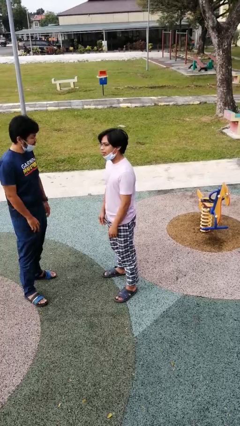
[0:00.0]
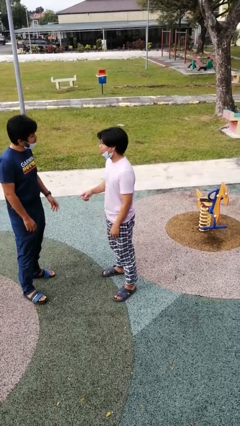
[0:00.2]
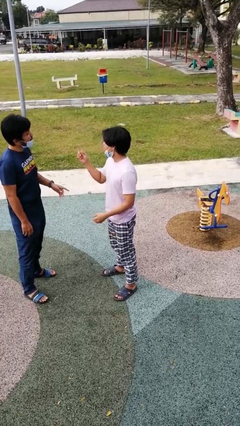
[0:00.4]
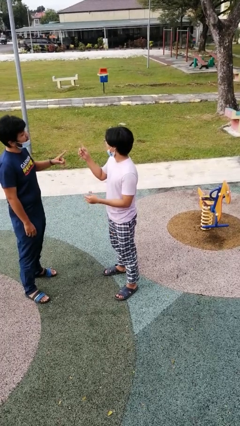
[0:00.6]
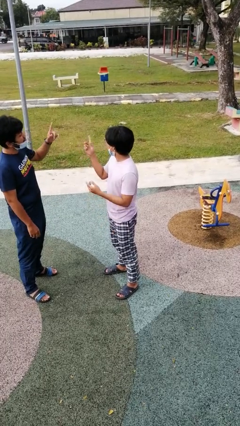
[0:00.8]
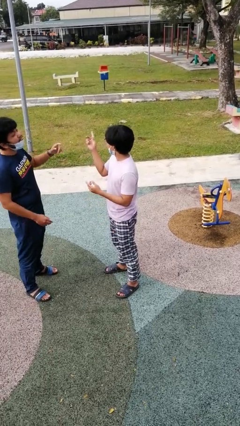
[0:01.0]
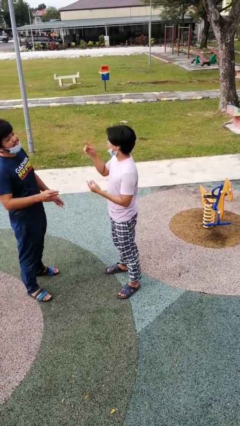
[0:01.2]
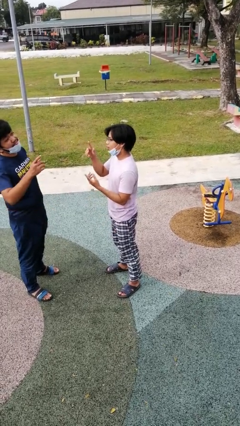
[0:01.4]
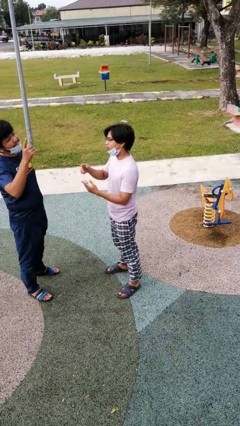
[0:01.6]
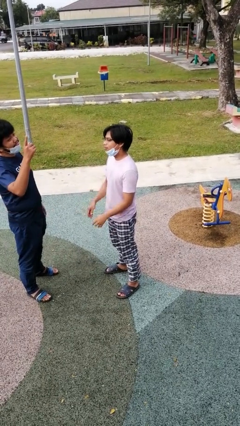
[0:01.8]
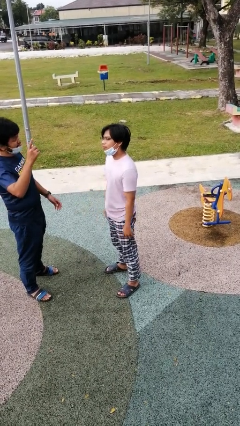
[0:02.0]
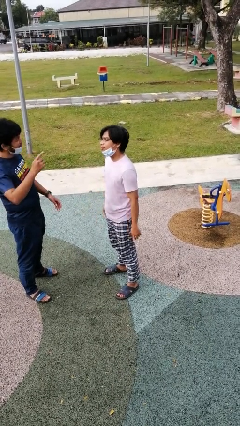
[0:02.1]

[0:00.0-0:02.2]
person talks to person

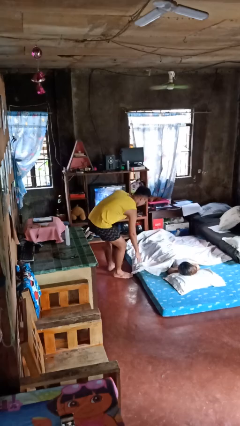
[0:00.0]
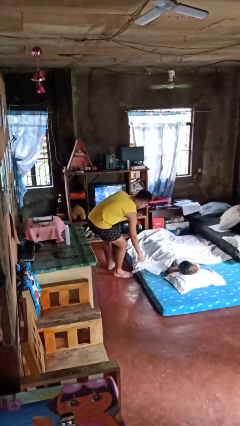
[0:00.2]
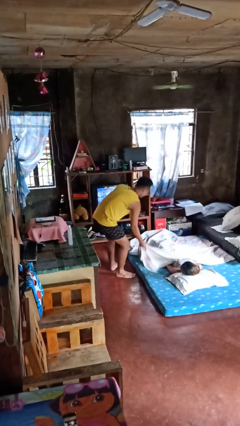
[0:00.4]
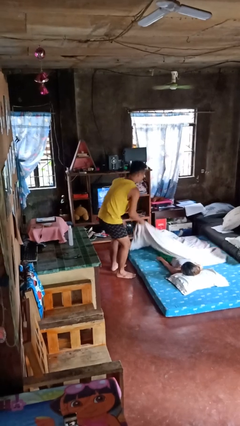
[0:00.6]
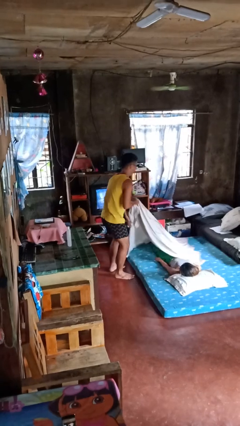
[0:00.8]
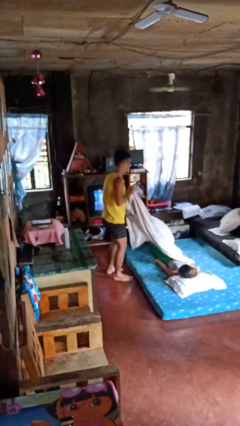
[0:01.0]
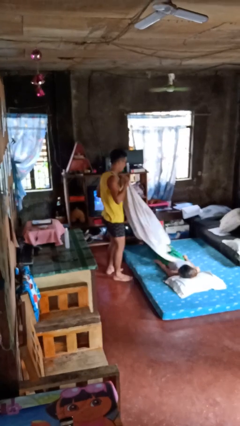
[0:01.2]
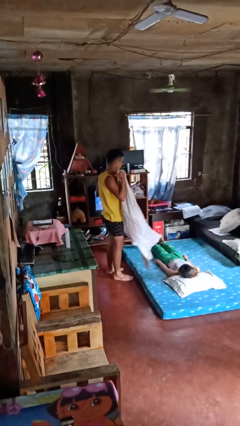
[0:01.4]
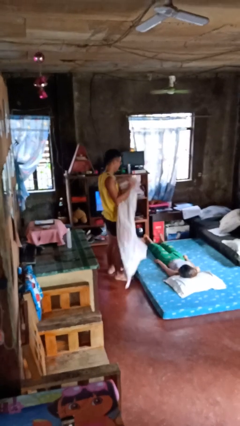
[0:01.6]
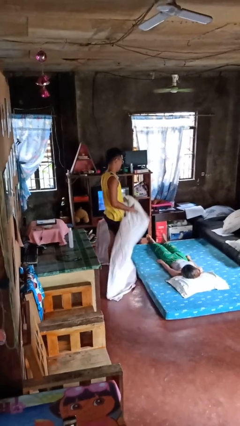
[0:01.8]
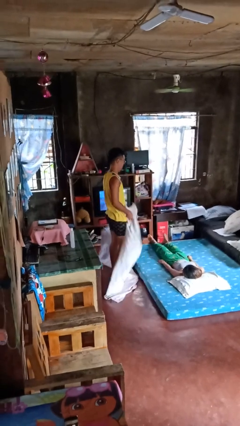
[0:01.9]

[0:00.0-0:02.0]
person uncovers friend with blanket

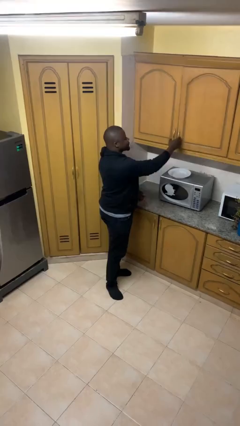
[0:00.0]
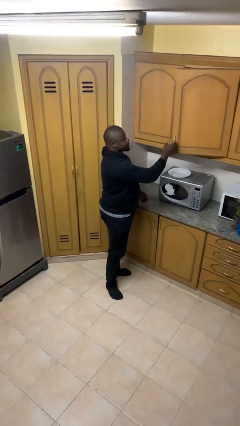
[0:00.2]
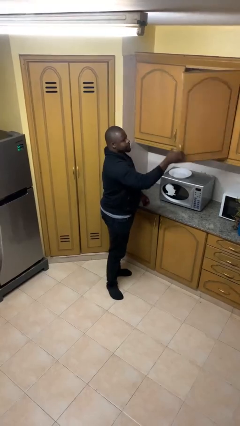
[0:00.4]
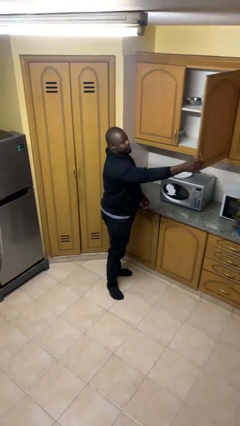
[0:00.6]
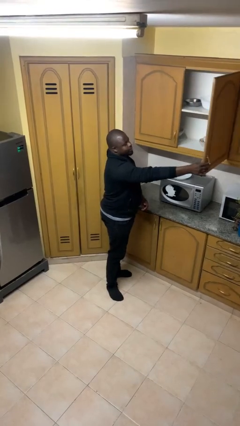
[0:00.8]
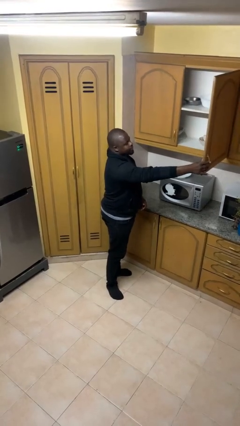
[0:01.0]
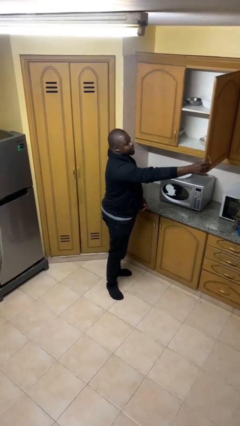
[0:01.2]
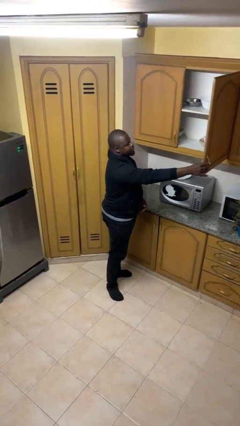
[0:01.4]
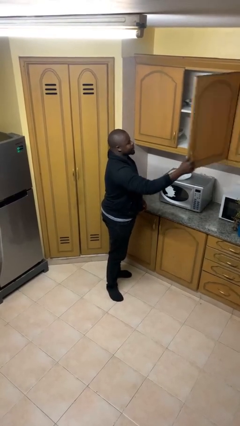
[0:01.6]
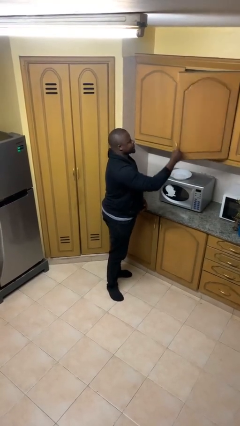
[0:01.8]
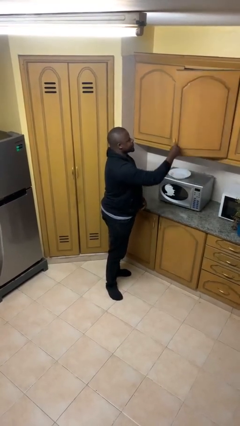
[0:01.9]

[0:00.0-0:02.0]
person opens cabinet

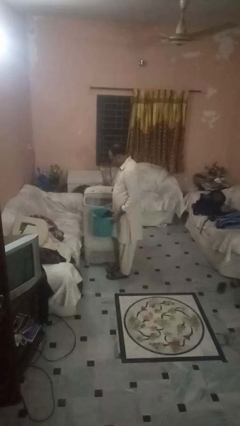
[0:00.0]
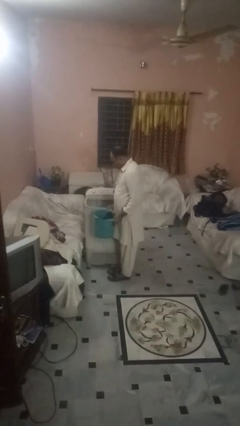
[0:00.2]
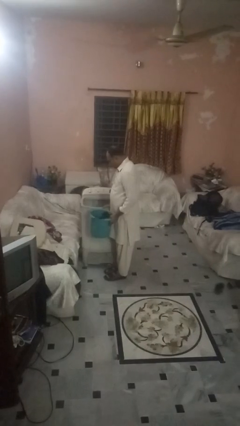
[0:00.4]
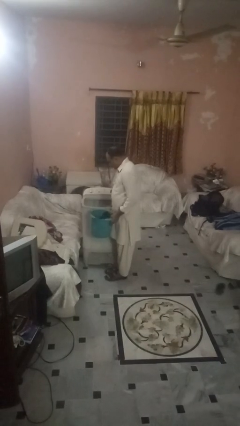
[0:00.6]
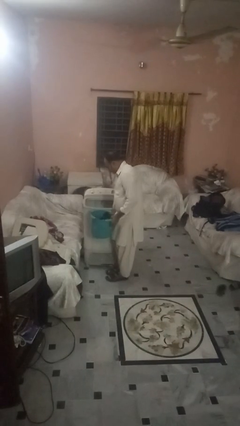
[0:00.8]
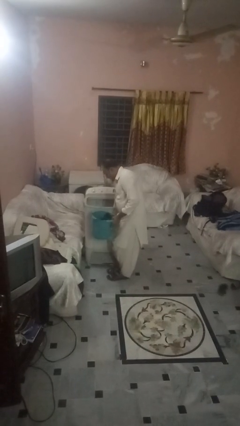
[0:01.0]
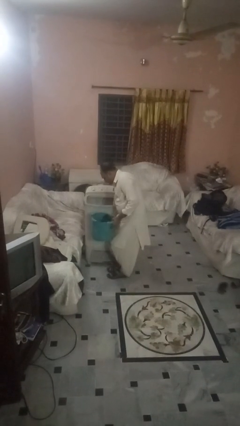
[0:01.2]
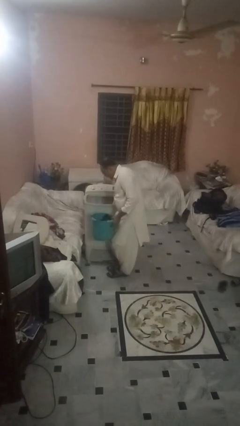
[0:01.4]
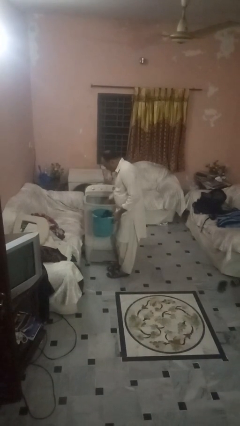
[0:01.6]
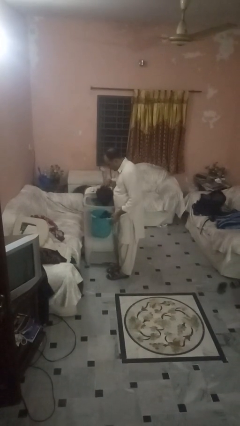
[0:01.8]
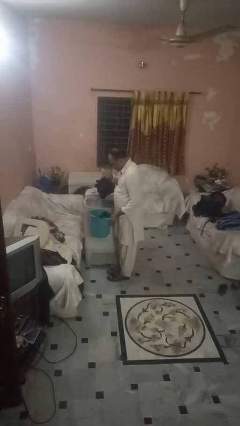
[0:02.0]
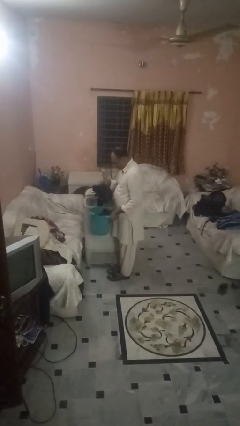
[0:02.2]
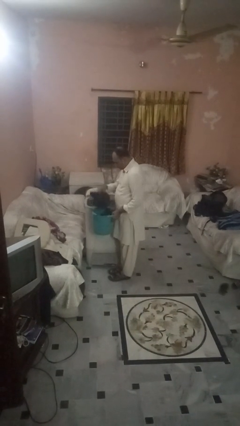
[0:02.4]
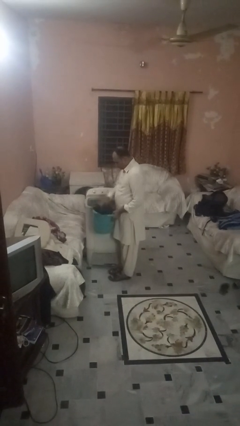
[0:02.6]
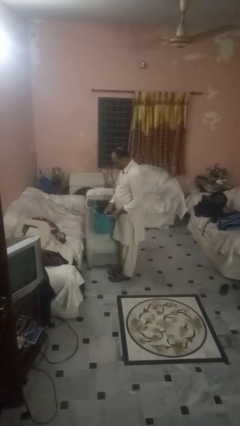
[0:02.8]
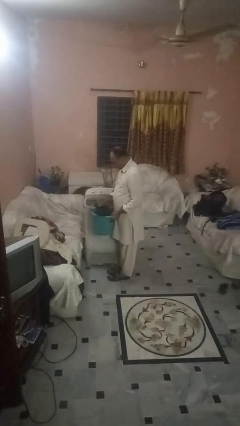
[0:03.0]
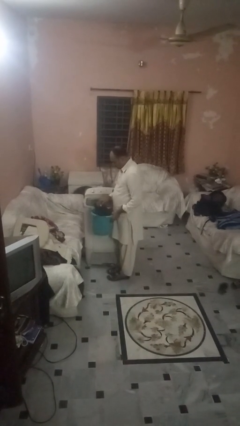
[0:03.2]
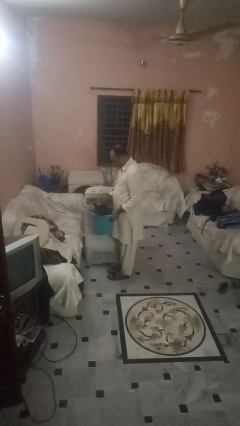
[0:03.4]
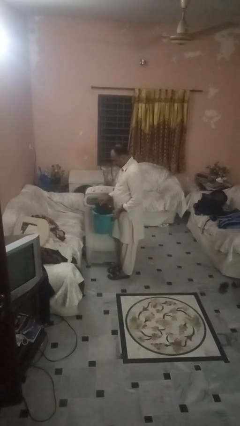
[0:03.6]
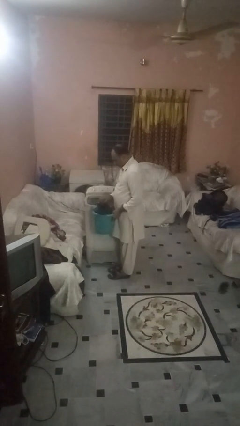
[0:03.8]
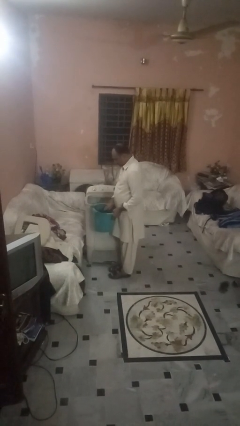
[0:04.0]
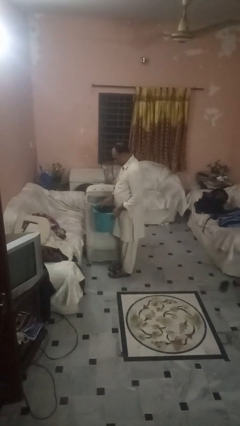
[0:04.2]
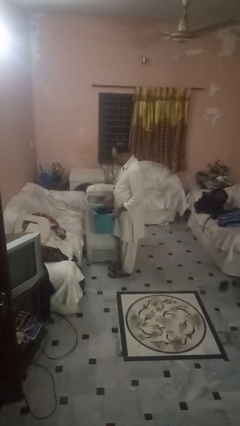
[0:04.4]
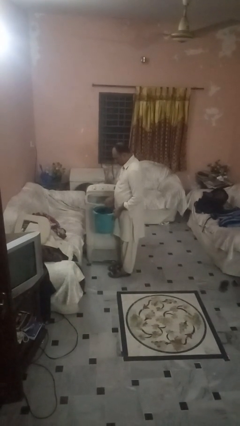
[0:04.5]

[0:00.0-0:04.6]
person unloads clotheswasher

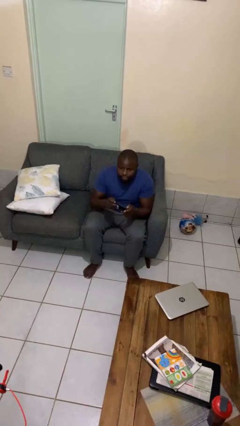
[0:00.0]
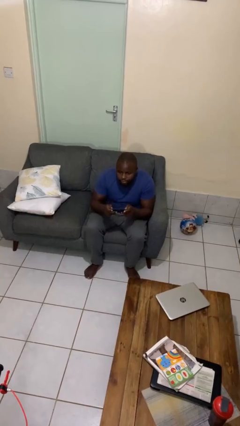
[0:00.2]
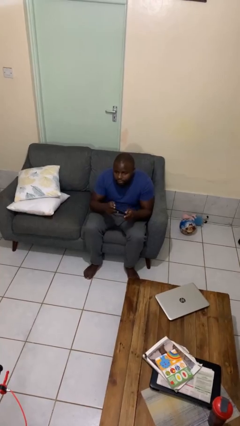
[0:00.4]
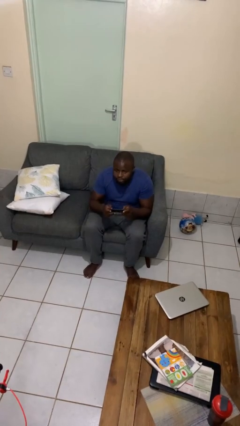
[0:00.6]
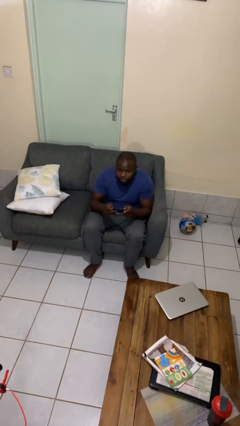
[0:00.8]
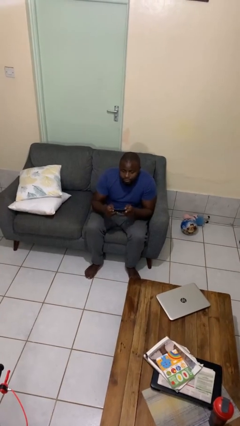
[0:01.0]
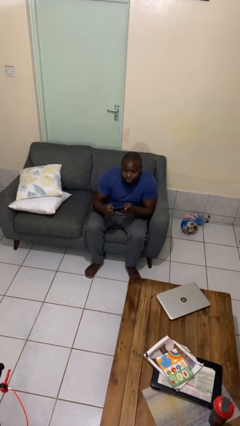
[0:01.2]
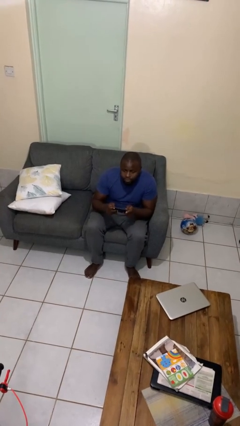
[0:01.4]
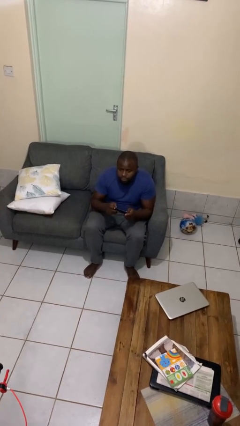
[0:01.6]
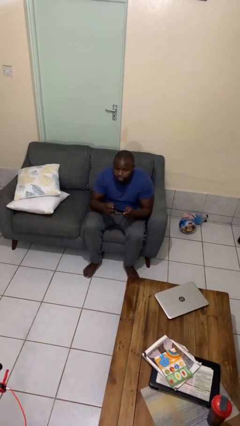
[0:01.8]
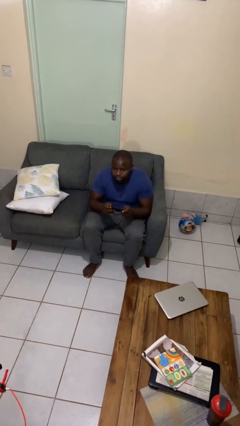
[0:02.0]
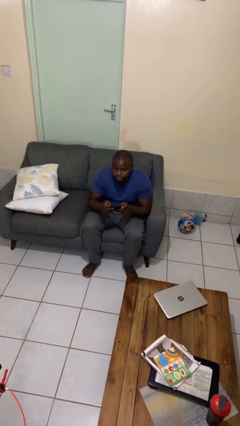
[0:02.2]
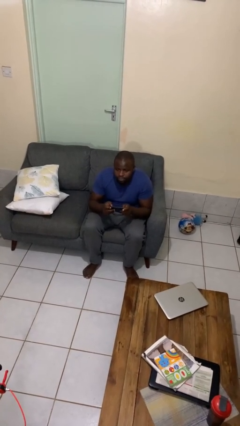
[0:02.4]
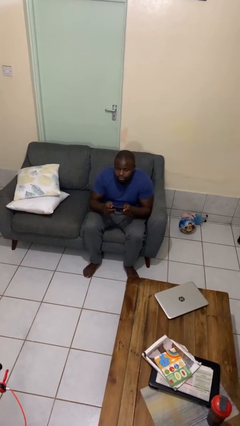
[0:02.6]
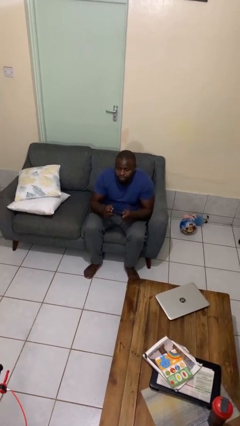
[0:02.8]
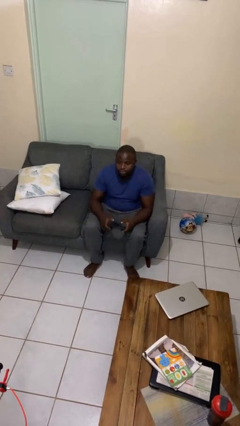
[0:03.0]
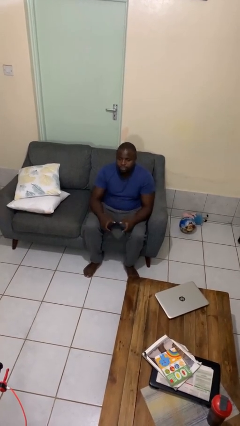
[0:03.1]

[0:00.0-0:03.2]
person interacts with handheld game

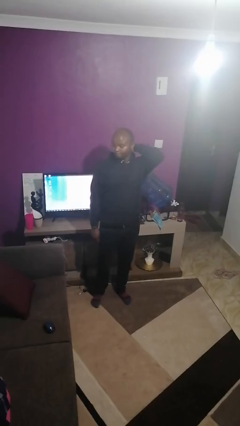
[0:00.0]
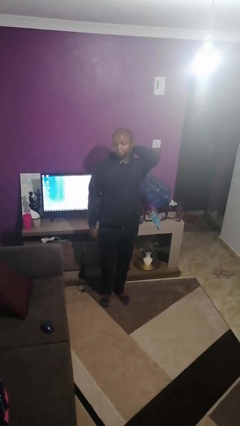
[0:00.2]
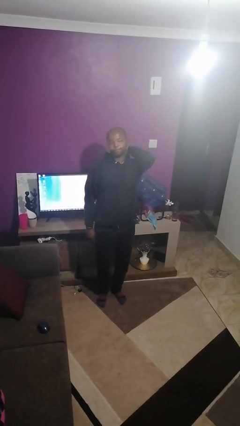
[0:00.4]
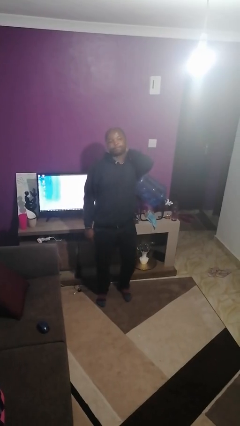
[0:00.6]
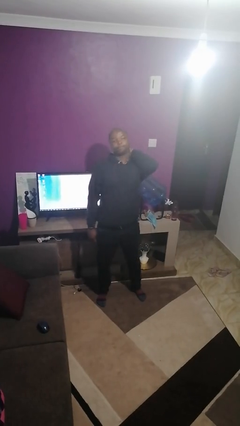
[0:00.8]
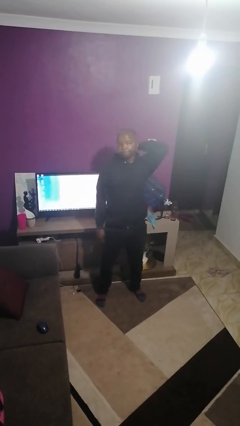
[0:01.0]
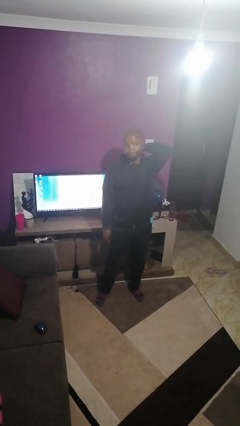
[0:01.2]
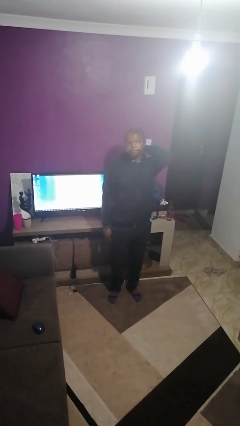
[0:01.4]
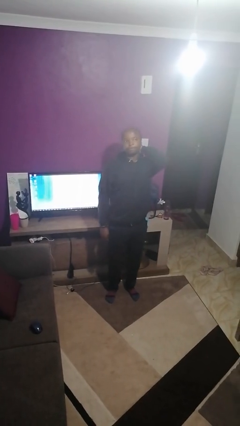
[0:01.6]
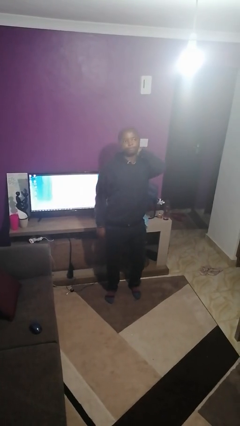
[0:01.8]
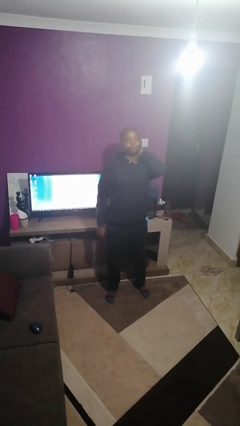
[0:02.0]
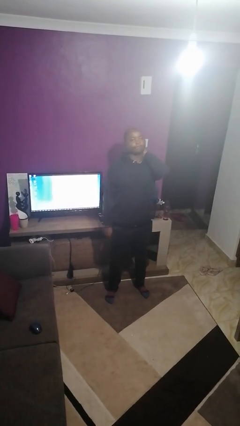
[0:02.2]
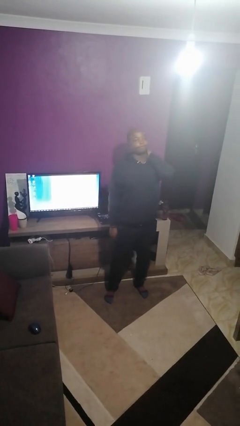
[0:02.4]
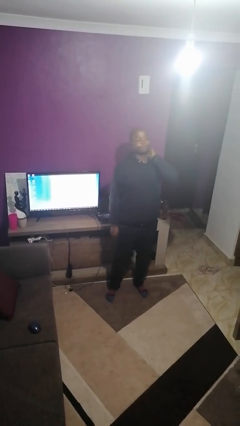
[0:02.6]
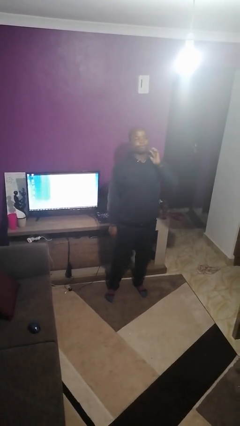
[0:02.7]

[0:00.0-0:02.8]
person rubs neck

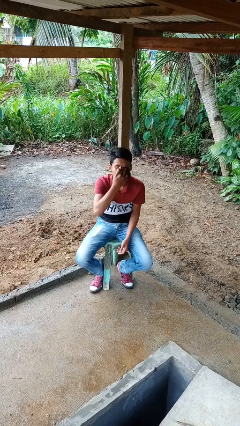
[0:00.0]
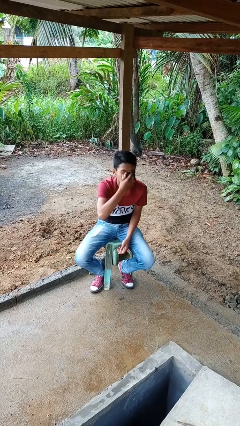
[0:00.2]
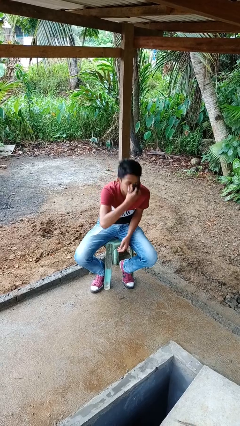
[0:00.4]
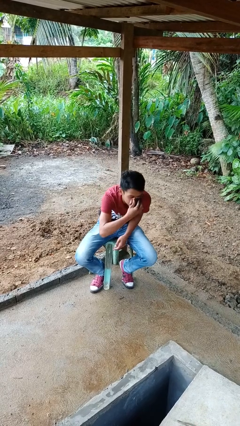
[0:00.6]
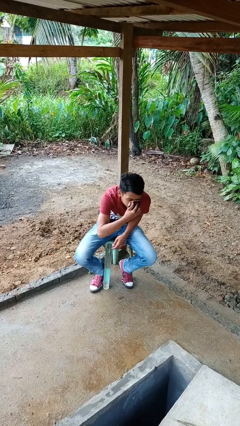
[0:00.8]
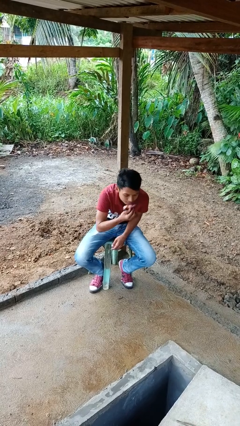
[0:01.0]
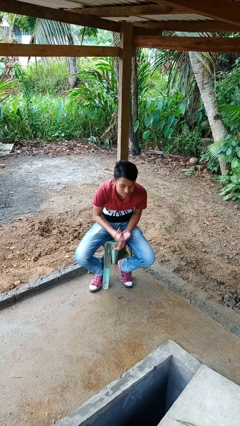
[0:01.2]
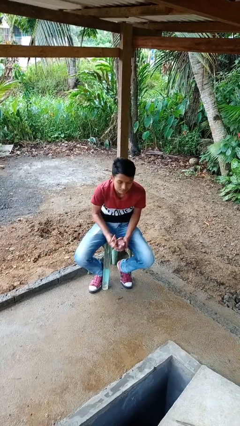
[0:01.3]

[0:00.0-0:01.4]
person blows nose
